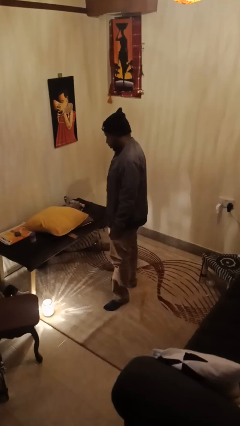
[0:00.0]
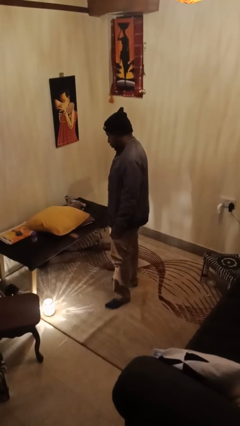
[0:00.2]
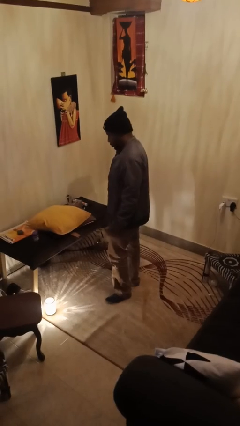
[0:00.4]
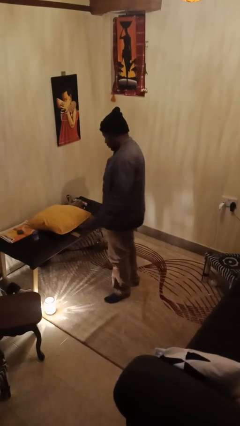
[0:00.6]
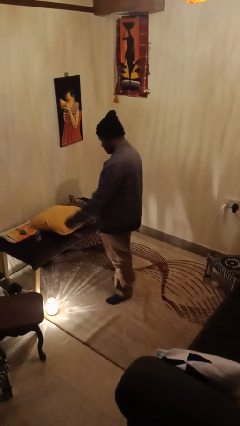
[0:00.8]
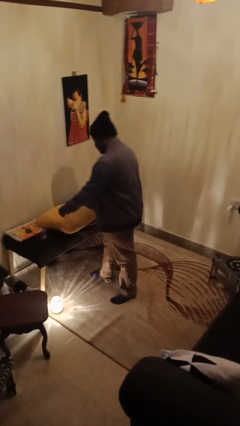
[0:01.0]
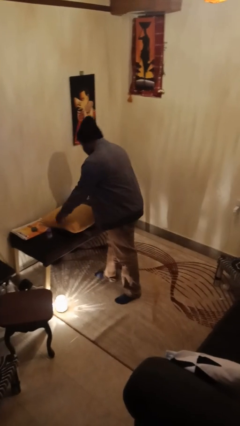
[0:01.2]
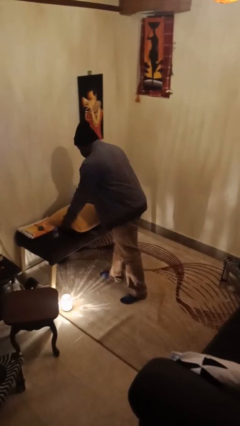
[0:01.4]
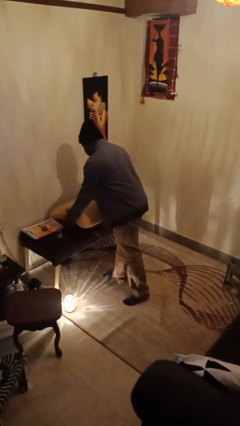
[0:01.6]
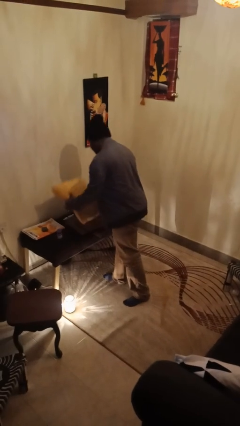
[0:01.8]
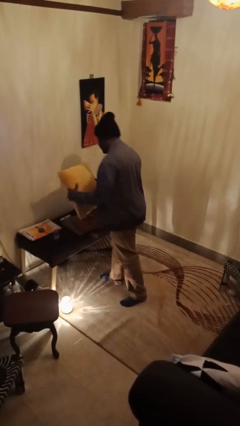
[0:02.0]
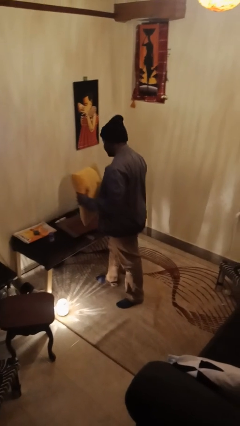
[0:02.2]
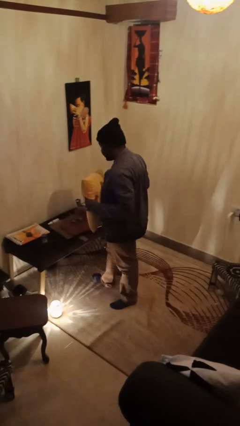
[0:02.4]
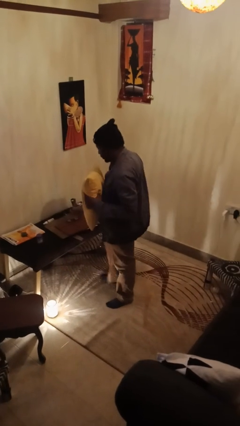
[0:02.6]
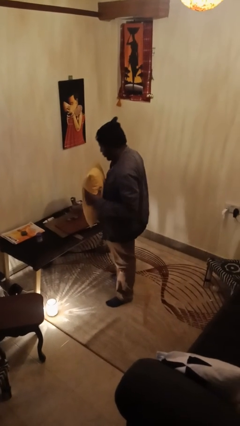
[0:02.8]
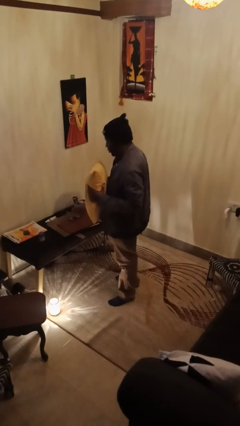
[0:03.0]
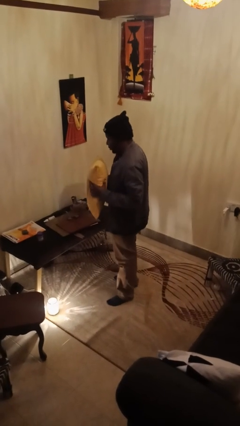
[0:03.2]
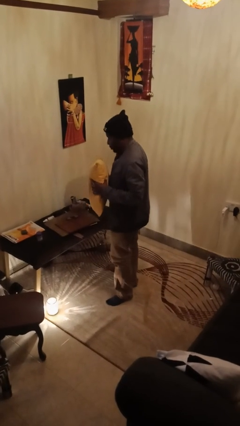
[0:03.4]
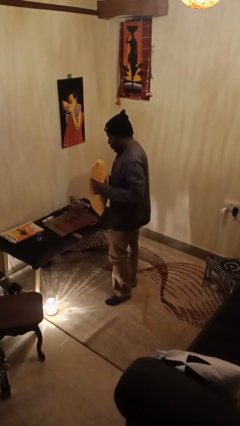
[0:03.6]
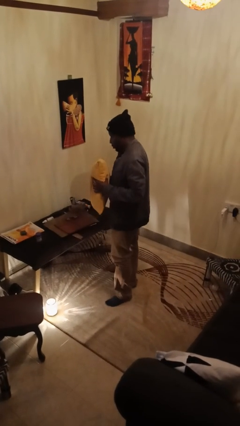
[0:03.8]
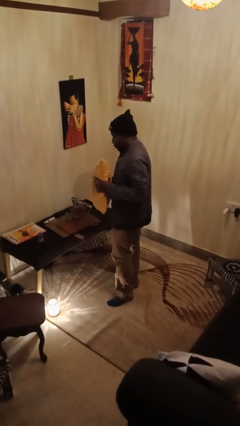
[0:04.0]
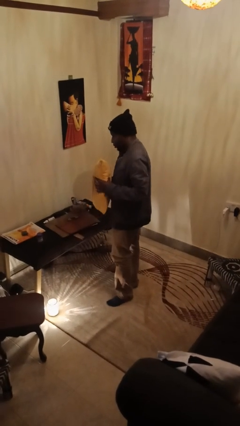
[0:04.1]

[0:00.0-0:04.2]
person picks up object from countertop

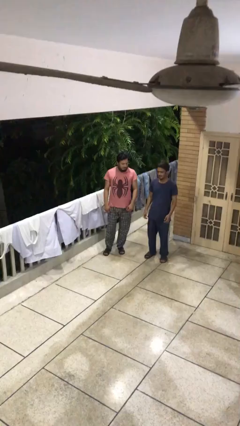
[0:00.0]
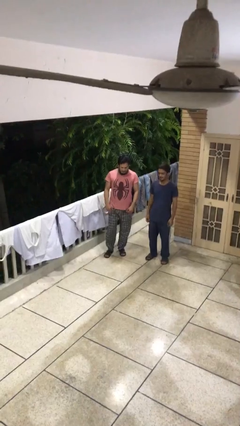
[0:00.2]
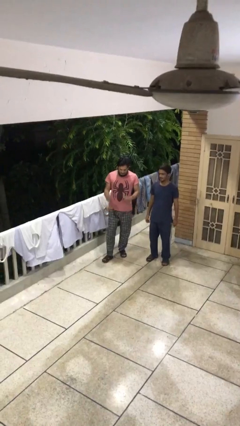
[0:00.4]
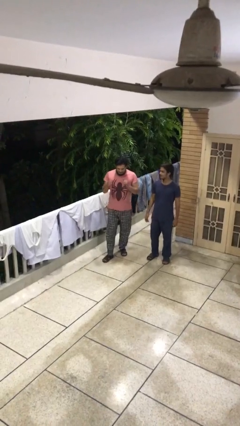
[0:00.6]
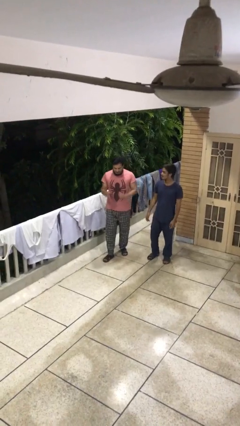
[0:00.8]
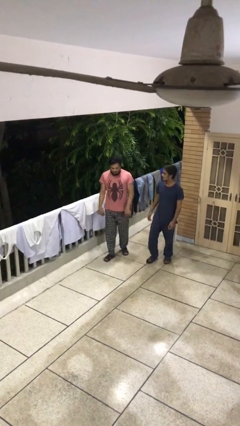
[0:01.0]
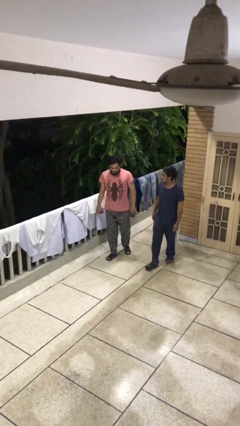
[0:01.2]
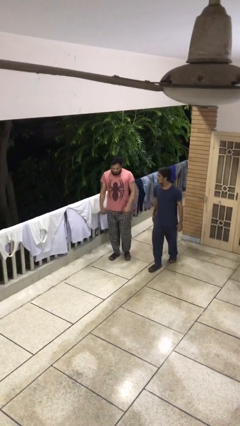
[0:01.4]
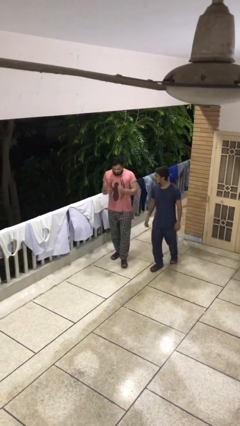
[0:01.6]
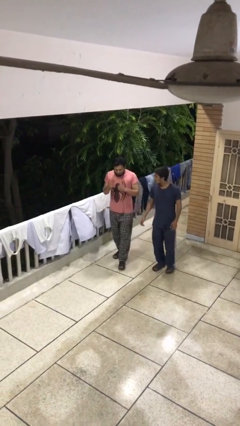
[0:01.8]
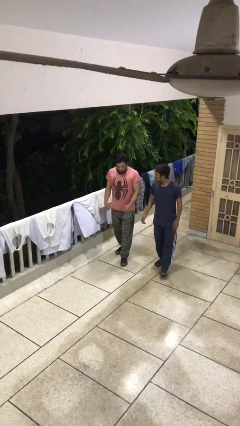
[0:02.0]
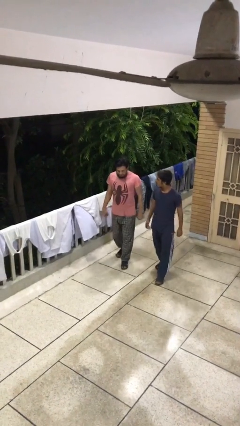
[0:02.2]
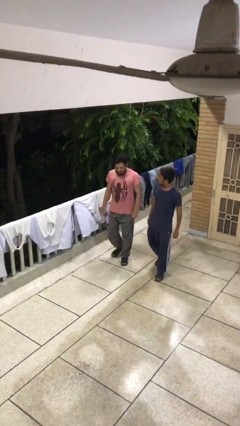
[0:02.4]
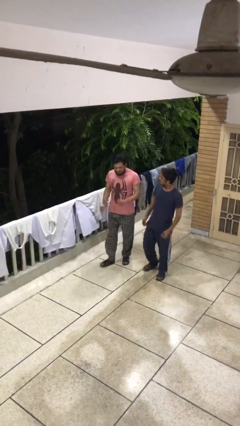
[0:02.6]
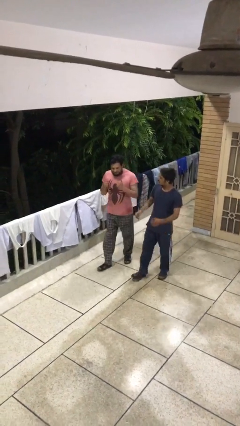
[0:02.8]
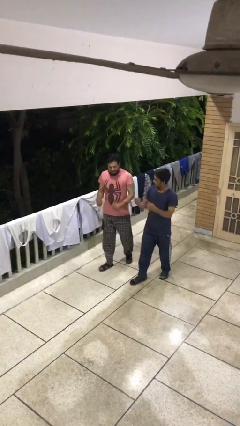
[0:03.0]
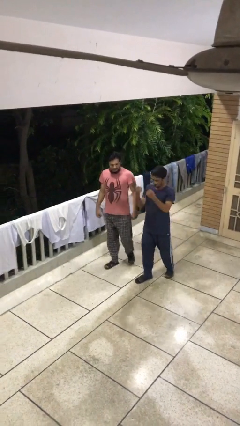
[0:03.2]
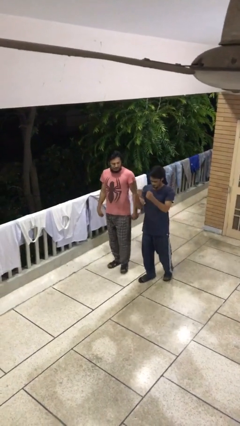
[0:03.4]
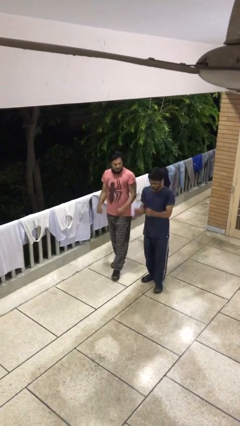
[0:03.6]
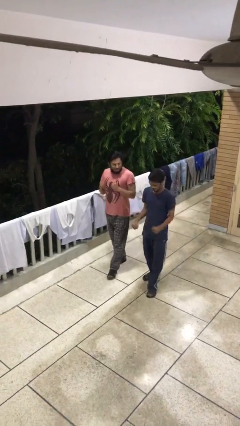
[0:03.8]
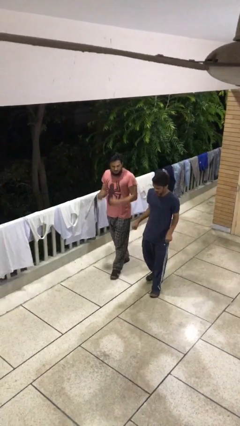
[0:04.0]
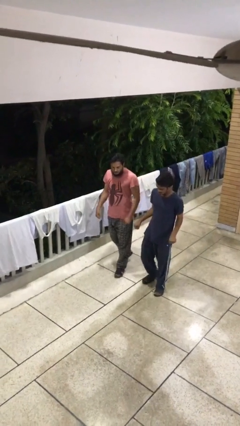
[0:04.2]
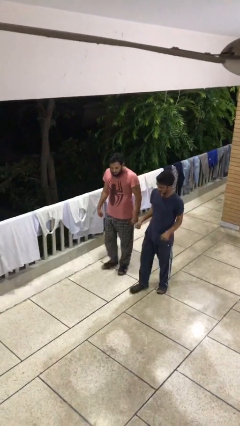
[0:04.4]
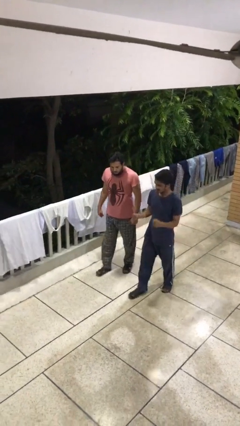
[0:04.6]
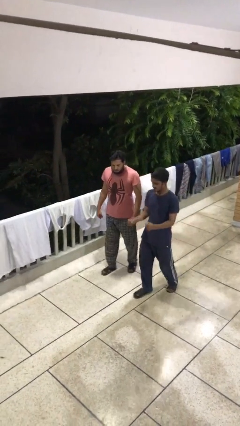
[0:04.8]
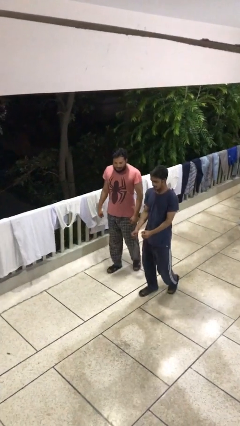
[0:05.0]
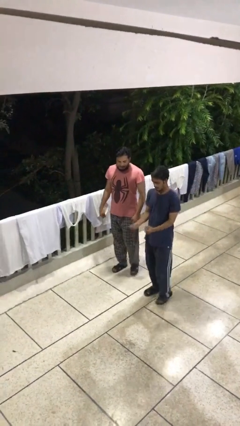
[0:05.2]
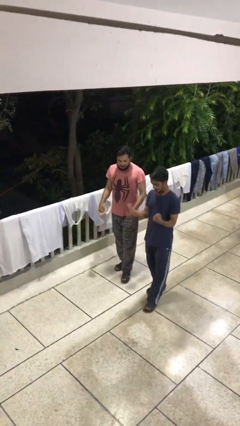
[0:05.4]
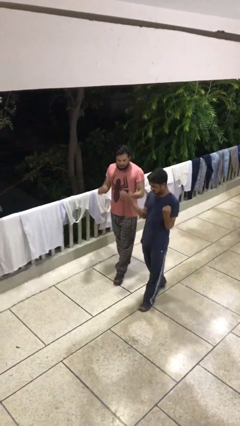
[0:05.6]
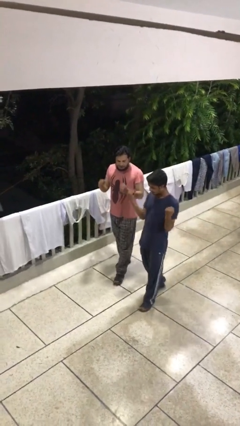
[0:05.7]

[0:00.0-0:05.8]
person talks to person

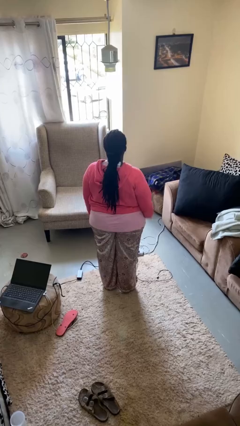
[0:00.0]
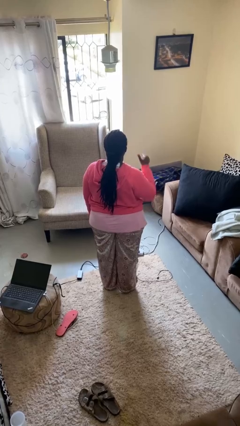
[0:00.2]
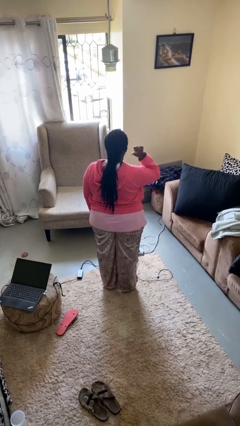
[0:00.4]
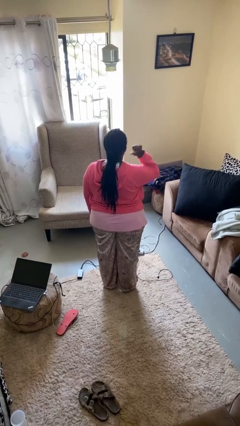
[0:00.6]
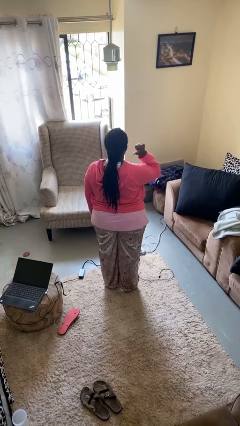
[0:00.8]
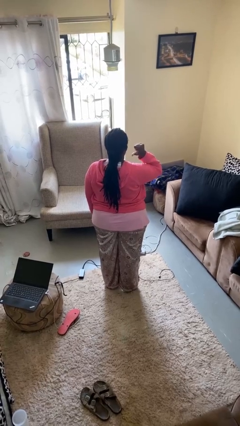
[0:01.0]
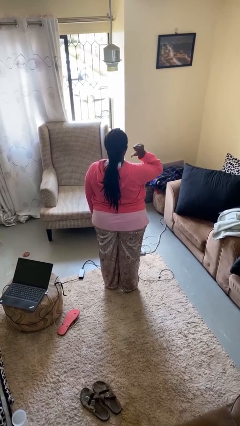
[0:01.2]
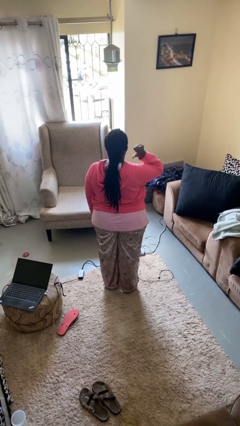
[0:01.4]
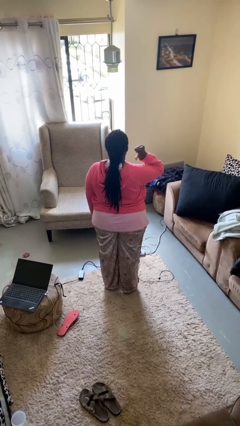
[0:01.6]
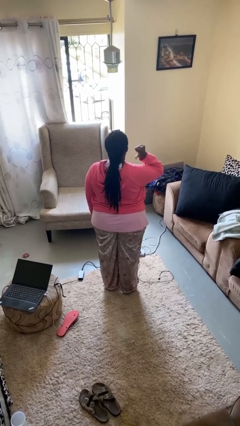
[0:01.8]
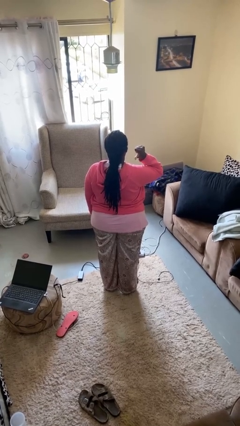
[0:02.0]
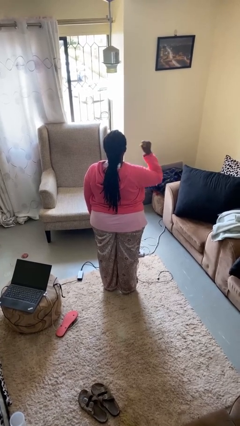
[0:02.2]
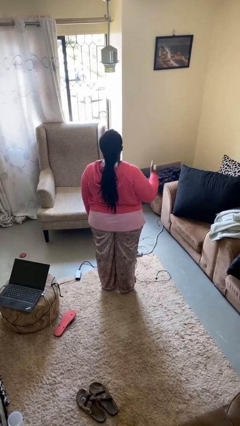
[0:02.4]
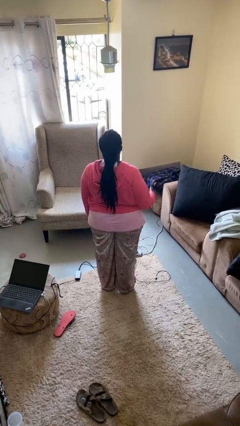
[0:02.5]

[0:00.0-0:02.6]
person gestures behind me

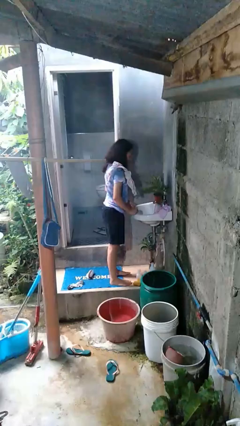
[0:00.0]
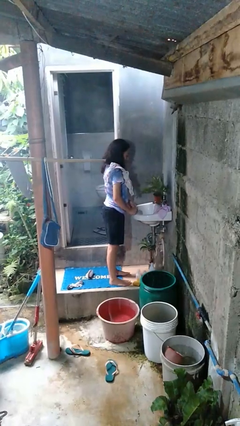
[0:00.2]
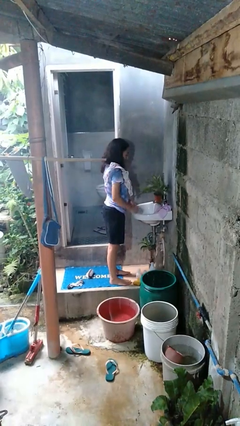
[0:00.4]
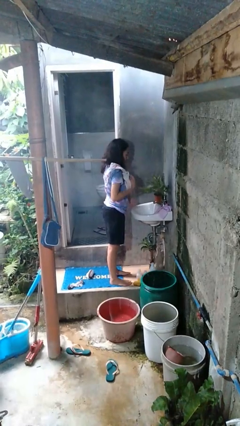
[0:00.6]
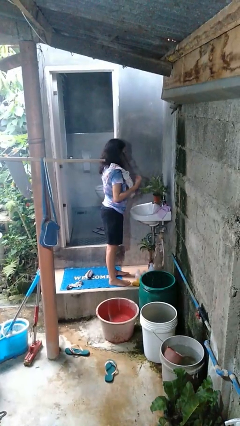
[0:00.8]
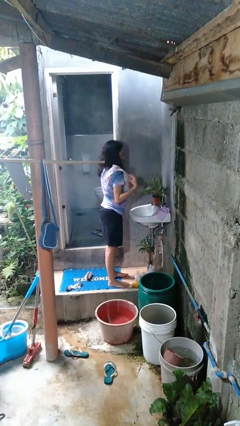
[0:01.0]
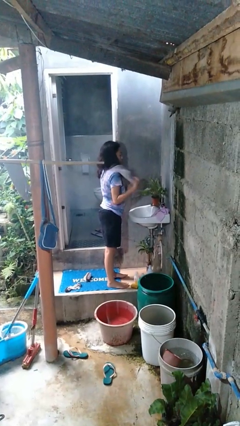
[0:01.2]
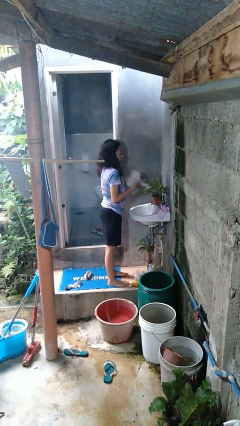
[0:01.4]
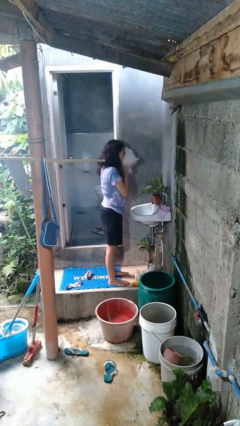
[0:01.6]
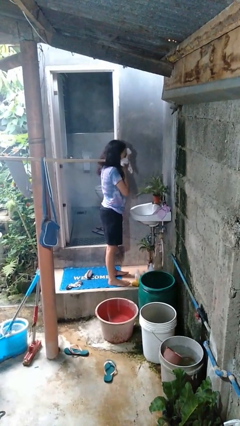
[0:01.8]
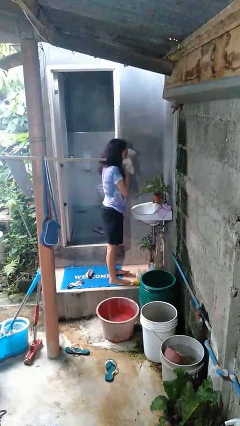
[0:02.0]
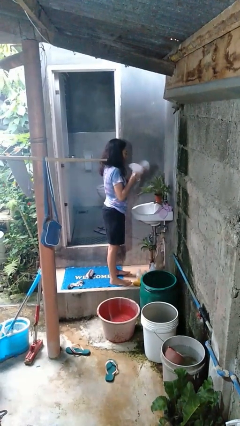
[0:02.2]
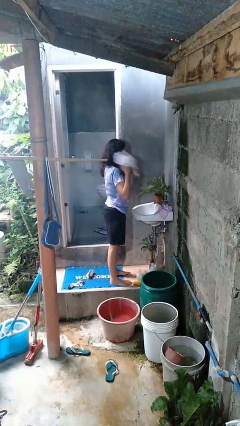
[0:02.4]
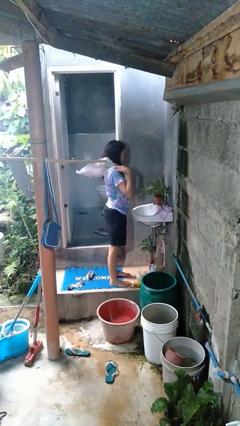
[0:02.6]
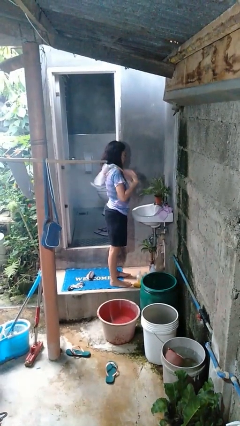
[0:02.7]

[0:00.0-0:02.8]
person dries face with towel

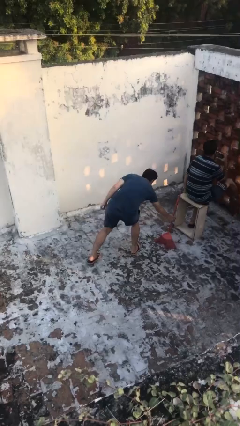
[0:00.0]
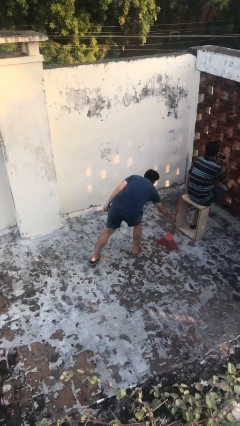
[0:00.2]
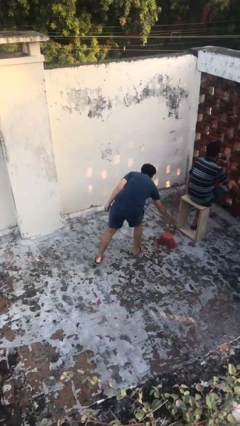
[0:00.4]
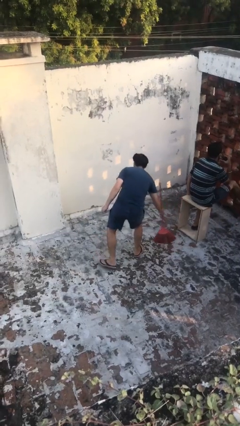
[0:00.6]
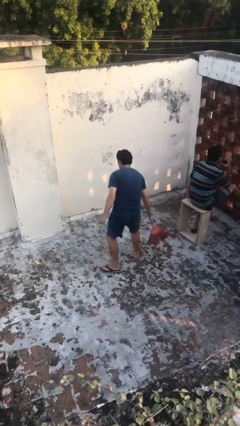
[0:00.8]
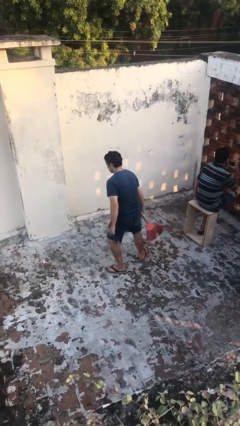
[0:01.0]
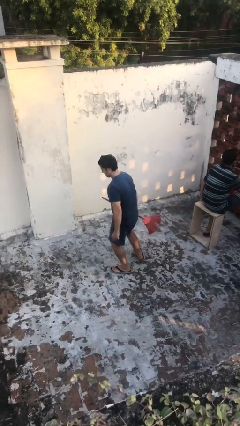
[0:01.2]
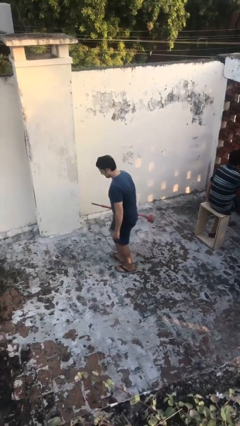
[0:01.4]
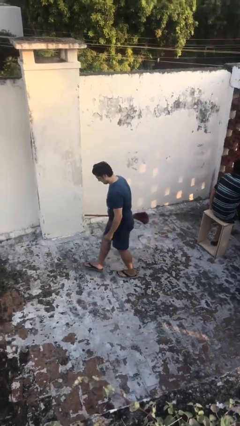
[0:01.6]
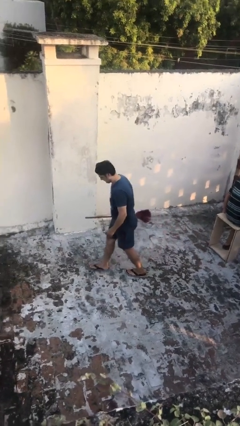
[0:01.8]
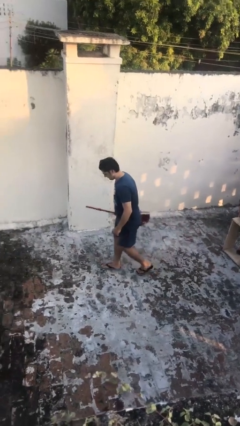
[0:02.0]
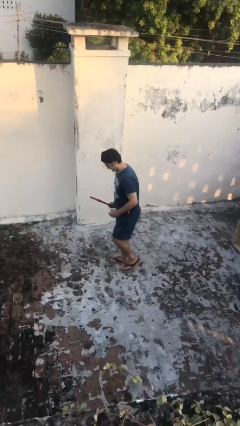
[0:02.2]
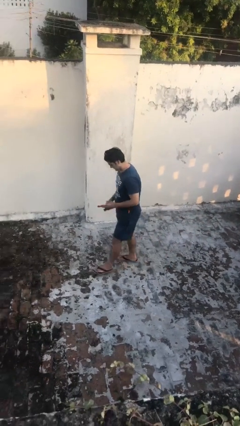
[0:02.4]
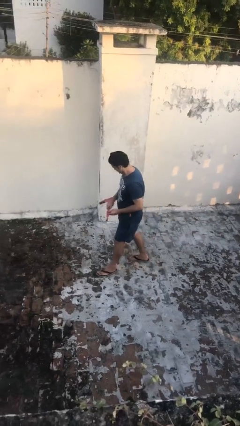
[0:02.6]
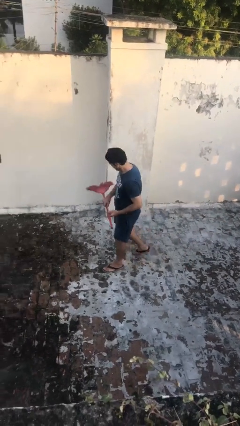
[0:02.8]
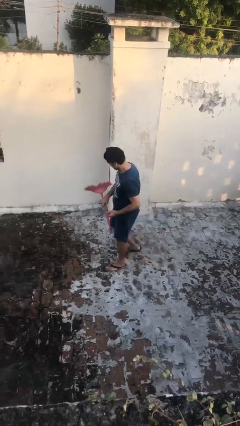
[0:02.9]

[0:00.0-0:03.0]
person steals object from person
